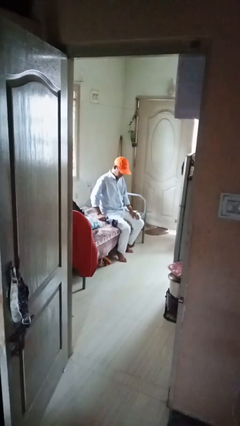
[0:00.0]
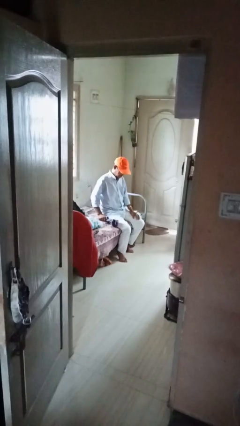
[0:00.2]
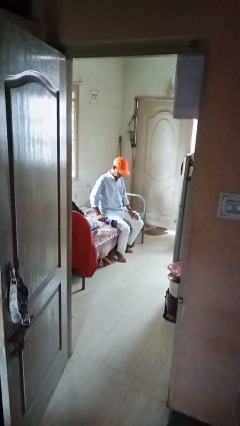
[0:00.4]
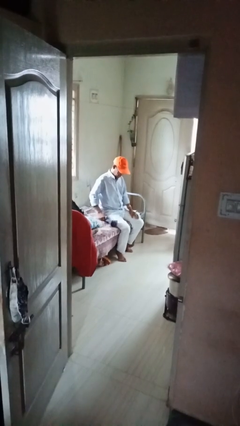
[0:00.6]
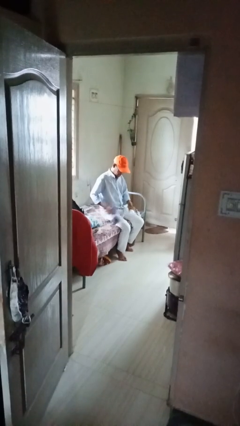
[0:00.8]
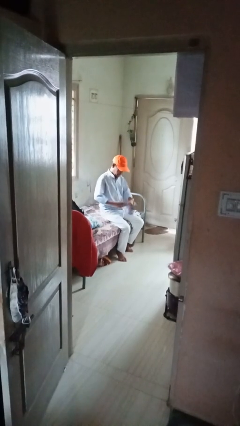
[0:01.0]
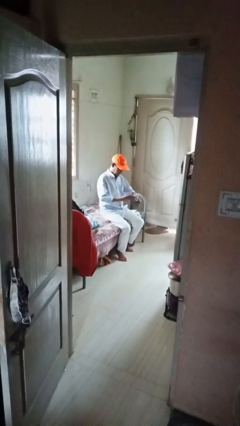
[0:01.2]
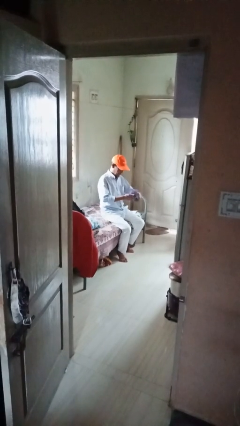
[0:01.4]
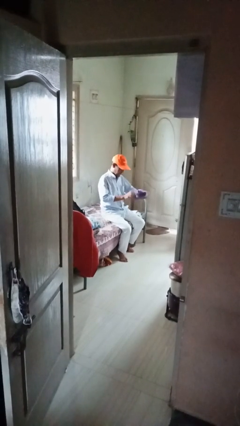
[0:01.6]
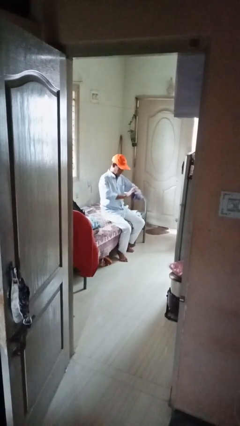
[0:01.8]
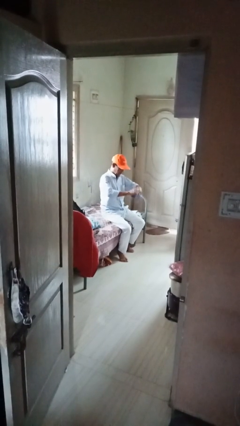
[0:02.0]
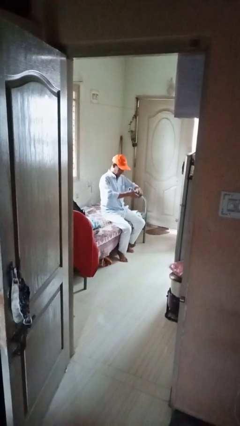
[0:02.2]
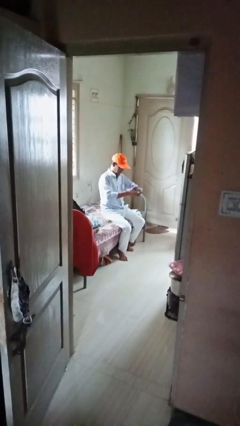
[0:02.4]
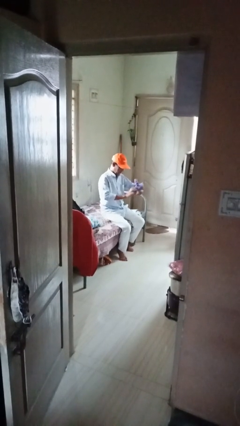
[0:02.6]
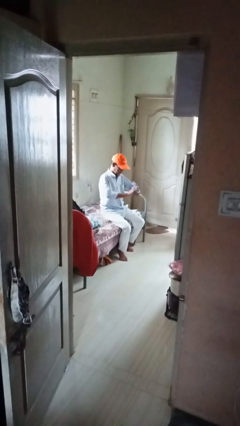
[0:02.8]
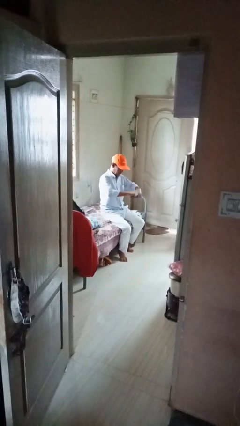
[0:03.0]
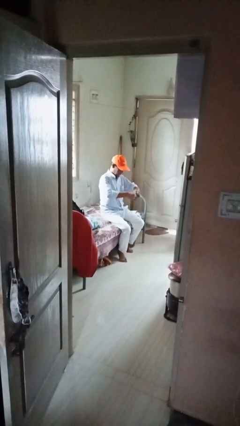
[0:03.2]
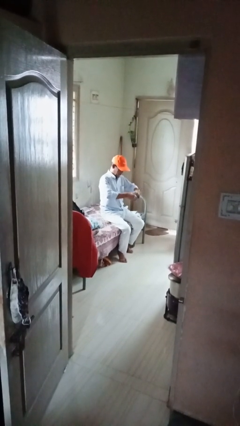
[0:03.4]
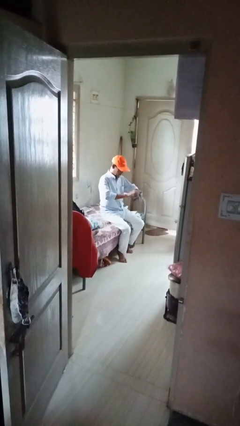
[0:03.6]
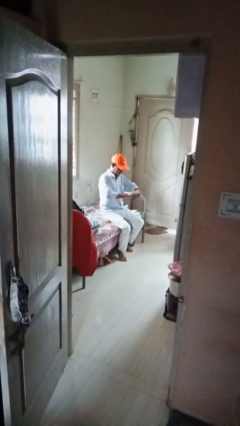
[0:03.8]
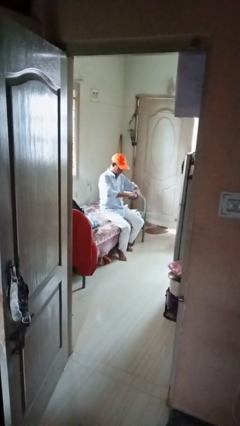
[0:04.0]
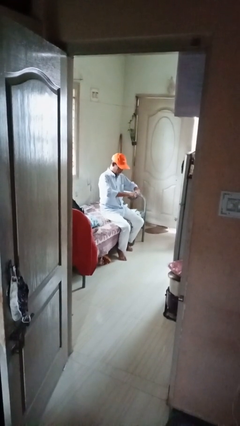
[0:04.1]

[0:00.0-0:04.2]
person squeezes object

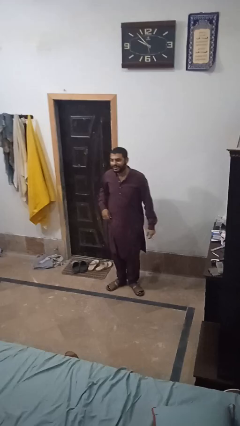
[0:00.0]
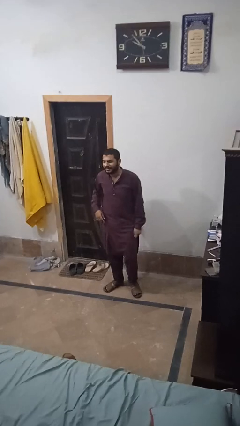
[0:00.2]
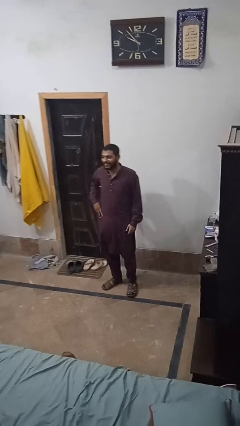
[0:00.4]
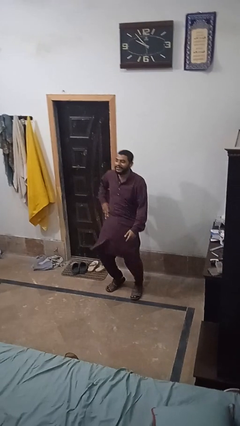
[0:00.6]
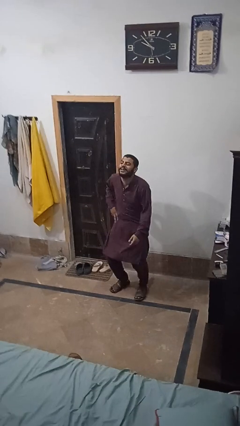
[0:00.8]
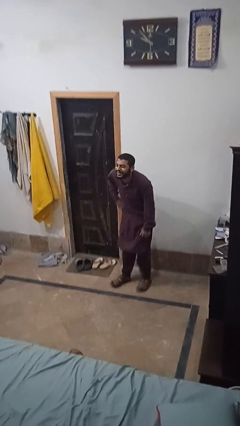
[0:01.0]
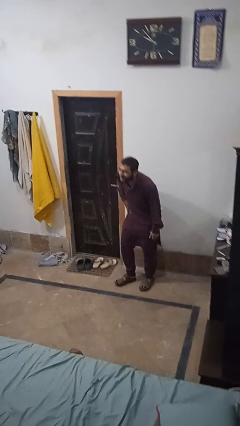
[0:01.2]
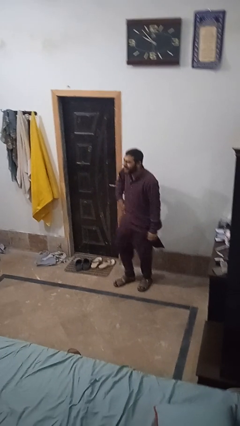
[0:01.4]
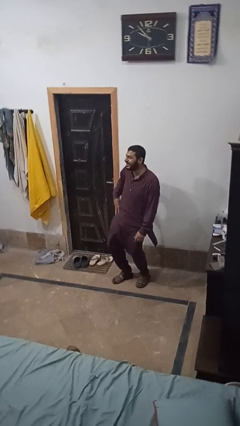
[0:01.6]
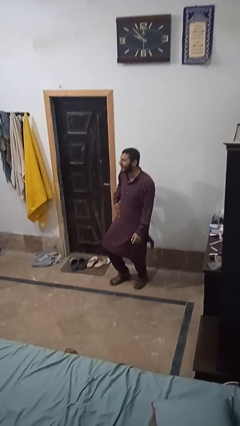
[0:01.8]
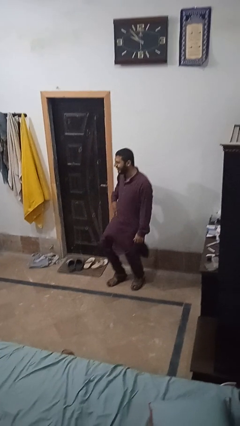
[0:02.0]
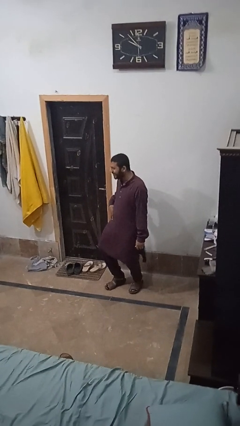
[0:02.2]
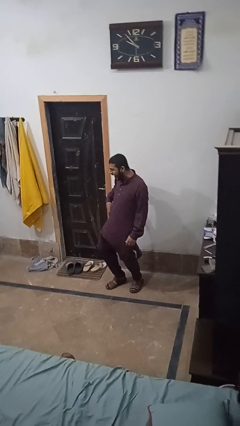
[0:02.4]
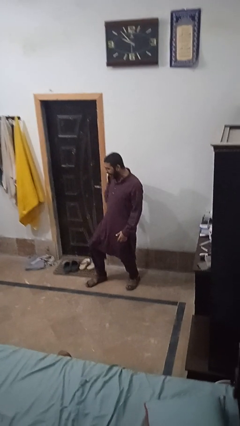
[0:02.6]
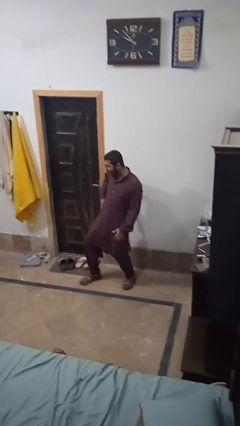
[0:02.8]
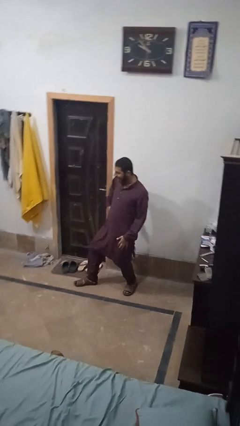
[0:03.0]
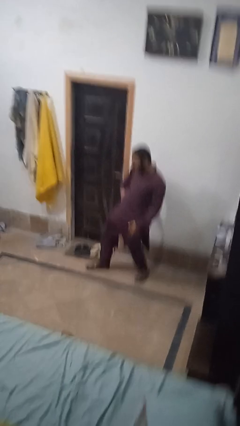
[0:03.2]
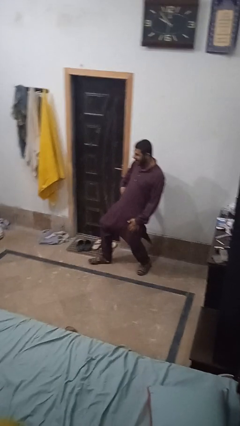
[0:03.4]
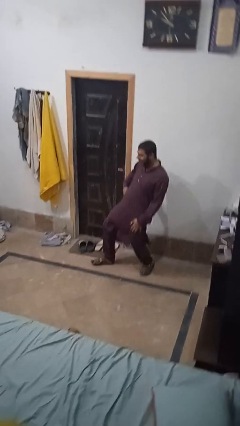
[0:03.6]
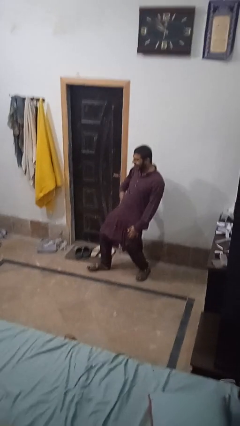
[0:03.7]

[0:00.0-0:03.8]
person dances in place

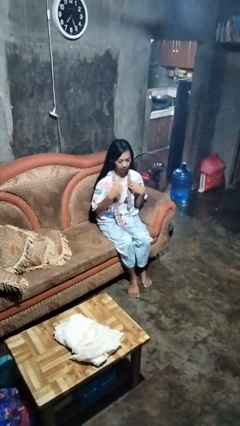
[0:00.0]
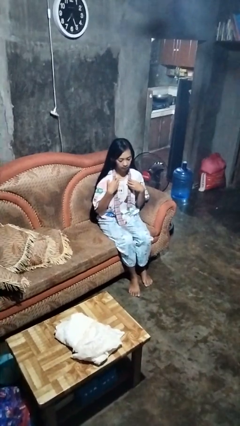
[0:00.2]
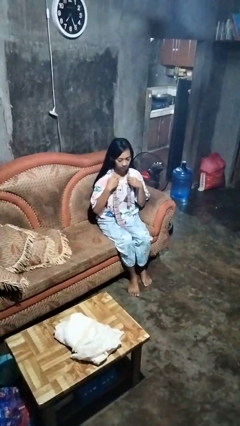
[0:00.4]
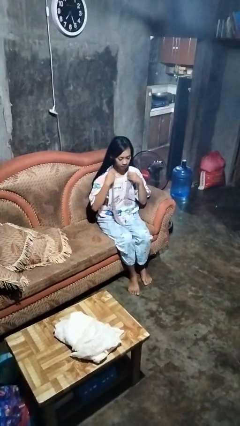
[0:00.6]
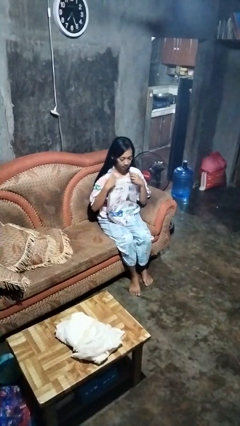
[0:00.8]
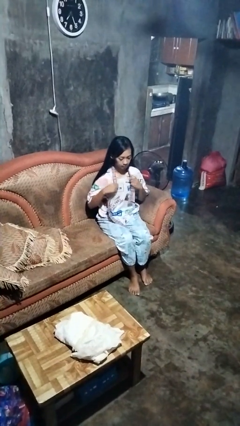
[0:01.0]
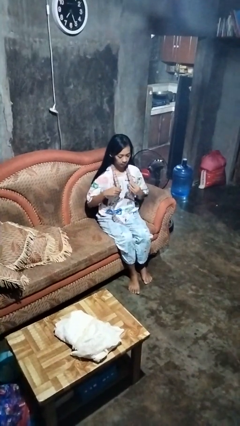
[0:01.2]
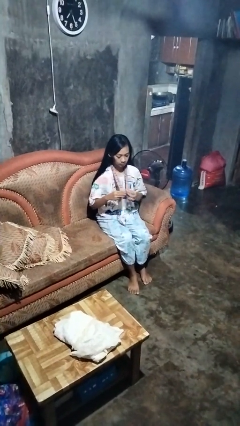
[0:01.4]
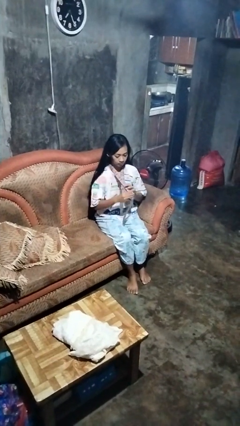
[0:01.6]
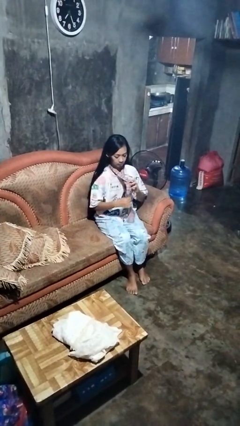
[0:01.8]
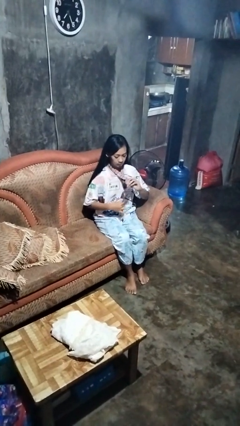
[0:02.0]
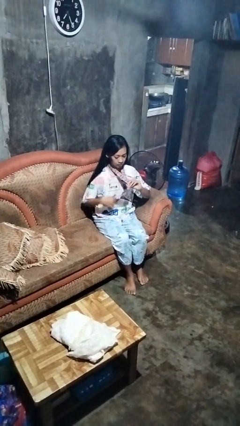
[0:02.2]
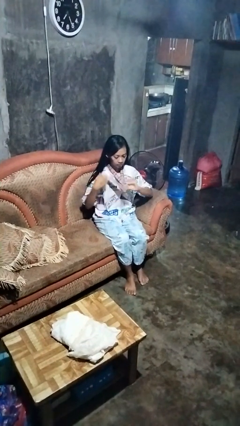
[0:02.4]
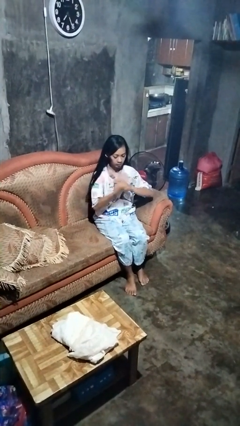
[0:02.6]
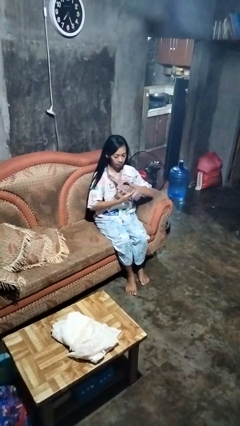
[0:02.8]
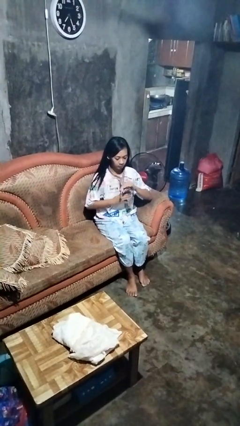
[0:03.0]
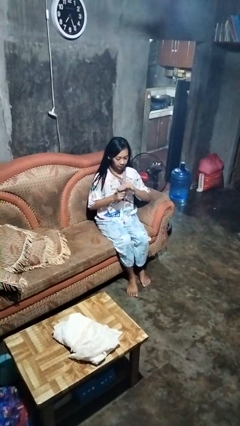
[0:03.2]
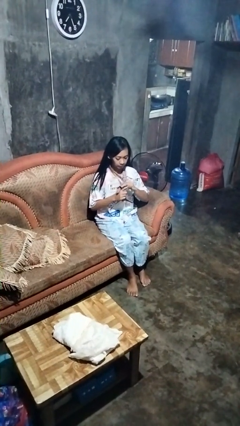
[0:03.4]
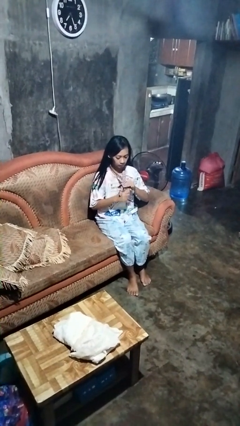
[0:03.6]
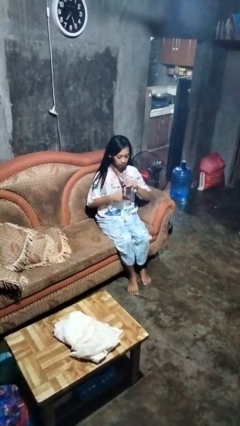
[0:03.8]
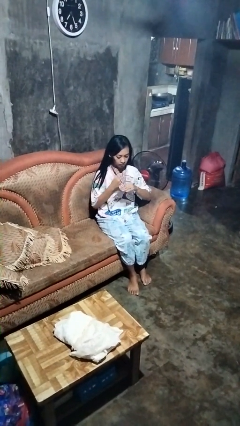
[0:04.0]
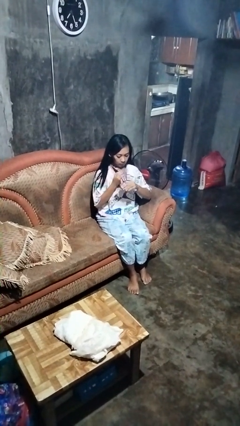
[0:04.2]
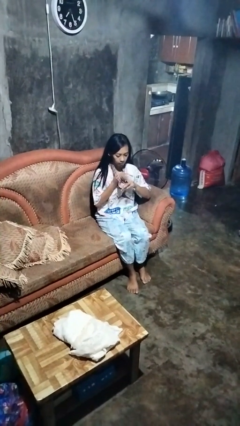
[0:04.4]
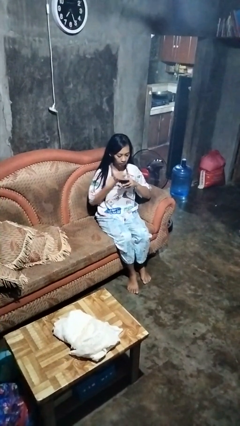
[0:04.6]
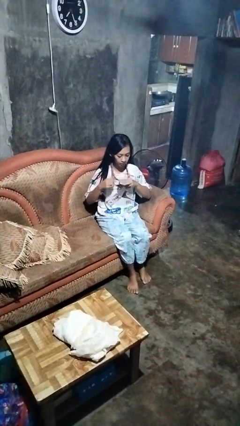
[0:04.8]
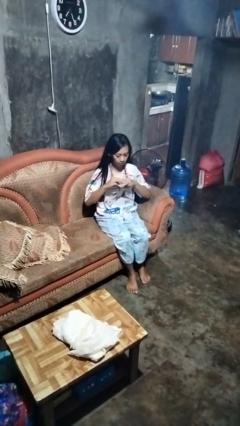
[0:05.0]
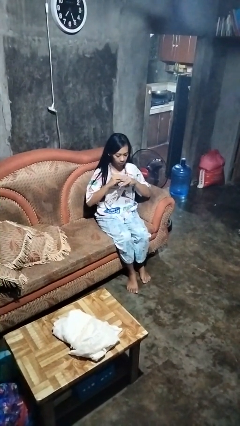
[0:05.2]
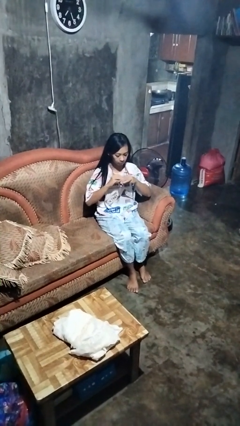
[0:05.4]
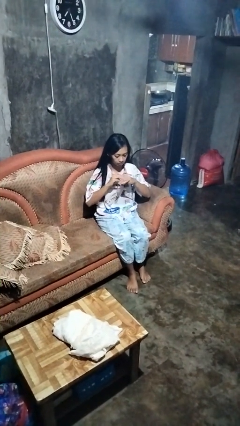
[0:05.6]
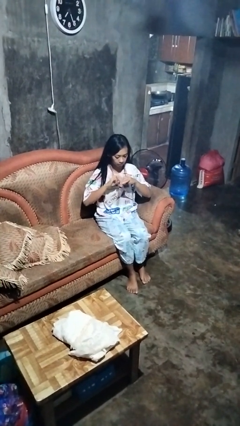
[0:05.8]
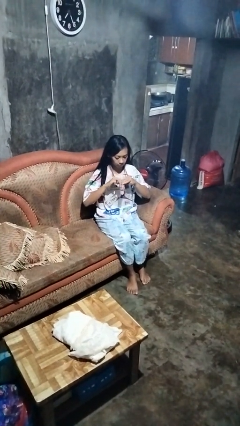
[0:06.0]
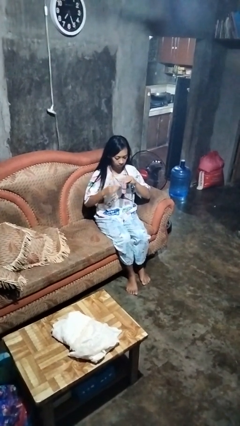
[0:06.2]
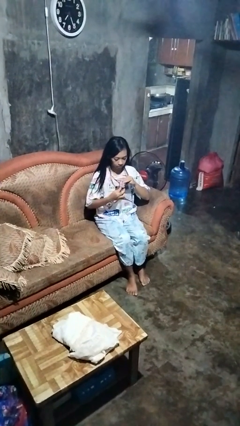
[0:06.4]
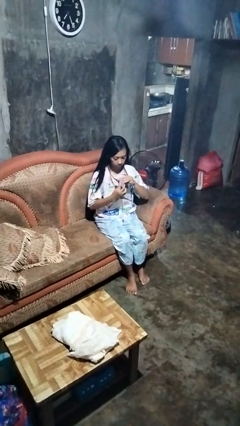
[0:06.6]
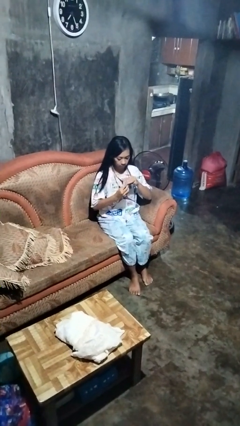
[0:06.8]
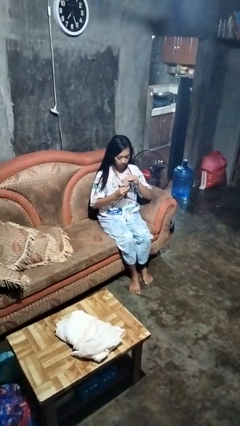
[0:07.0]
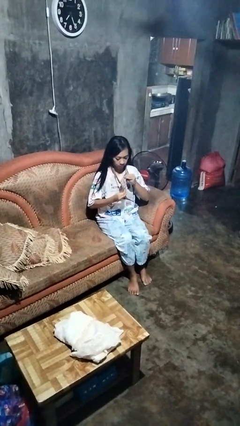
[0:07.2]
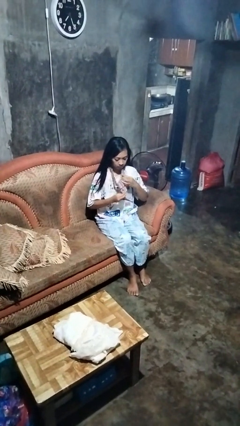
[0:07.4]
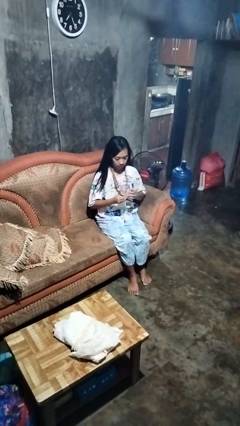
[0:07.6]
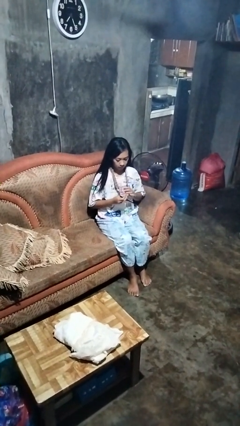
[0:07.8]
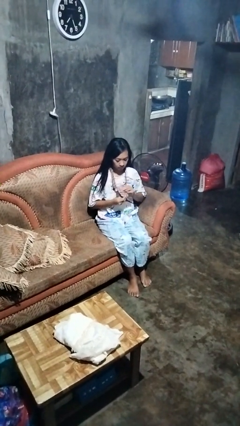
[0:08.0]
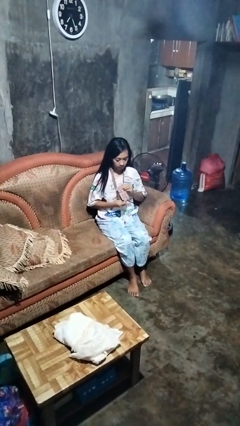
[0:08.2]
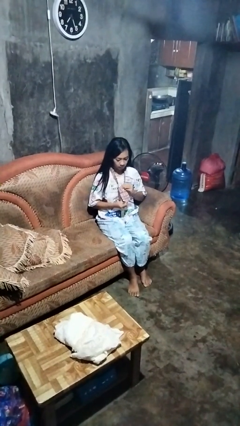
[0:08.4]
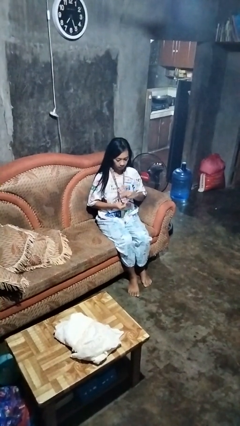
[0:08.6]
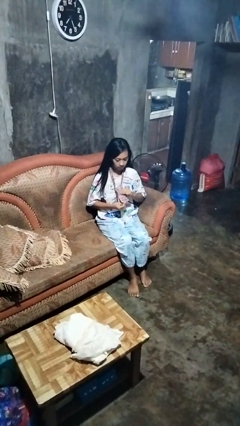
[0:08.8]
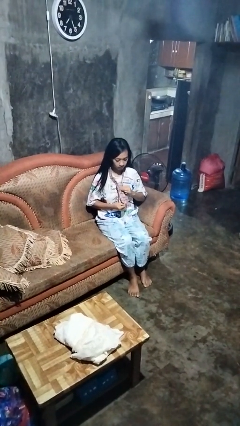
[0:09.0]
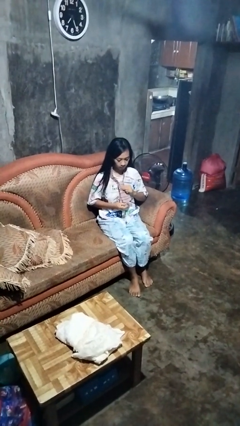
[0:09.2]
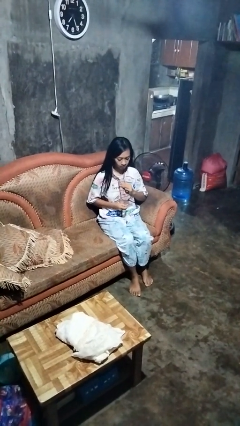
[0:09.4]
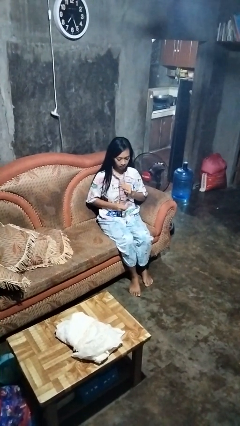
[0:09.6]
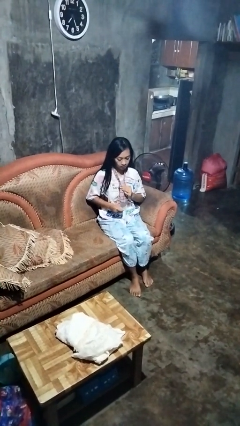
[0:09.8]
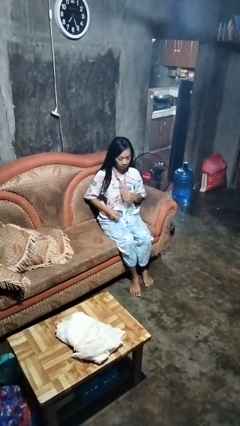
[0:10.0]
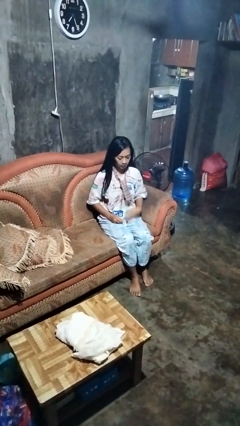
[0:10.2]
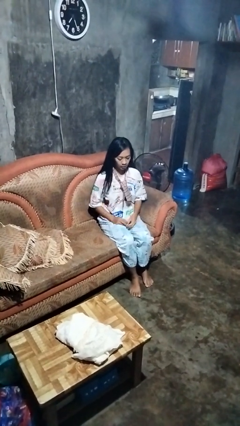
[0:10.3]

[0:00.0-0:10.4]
person puts on necktie
